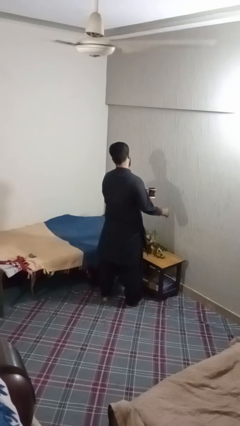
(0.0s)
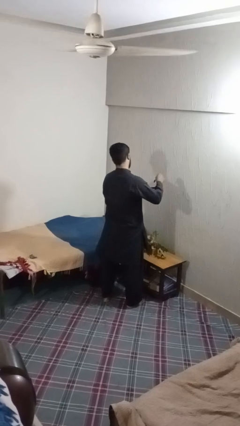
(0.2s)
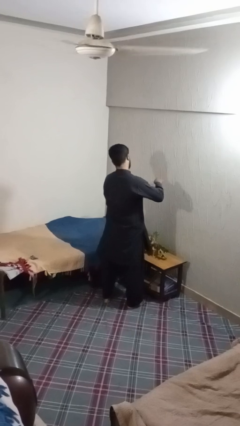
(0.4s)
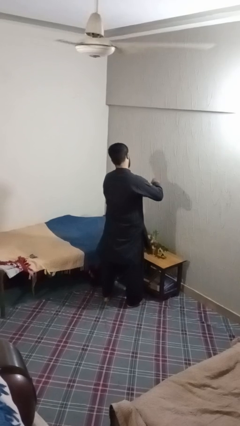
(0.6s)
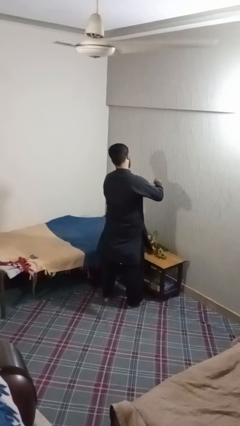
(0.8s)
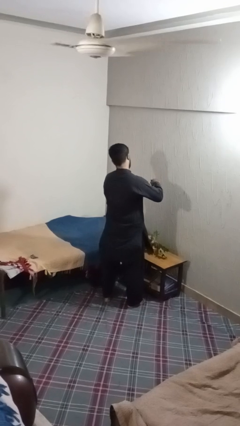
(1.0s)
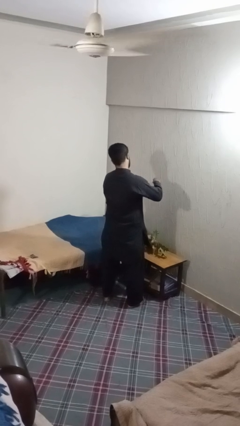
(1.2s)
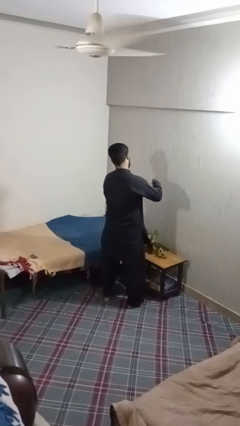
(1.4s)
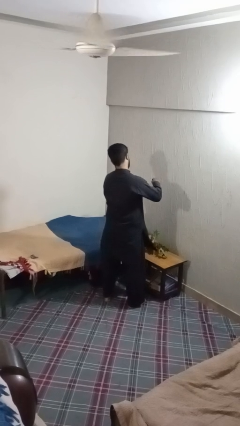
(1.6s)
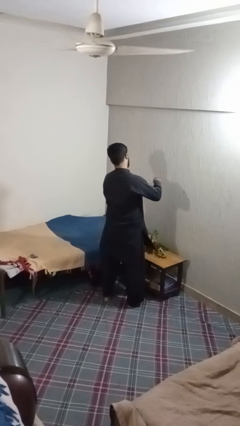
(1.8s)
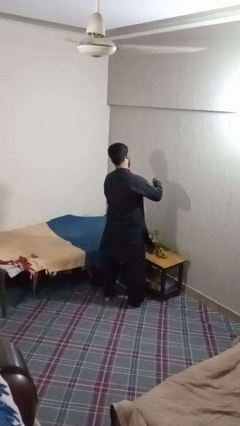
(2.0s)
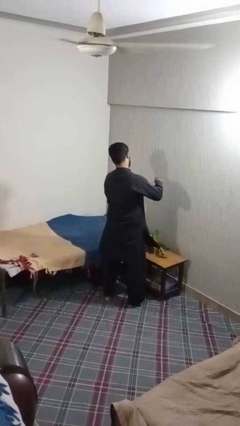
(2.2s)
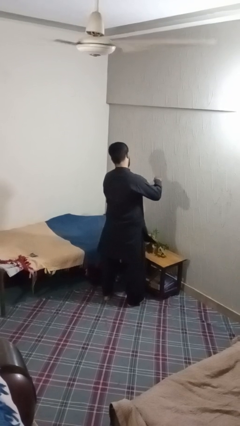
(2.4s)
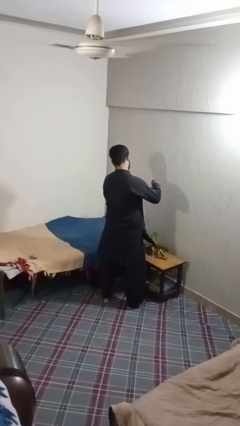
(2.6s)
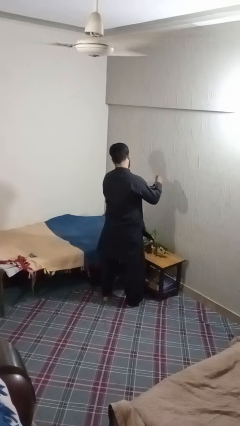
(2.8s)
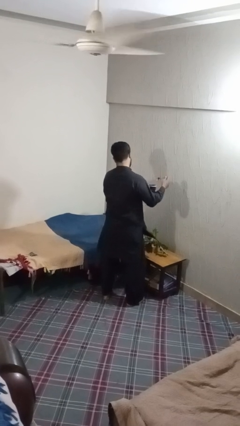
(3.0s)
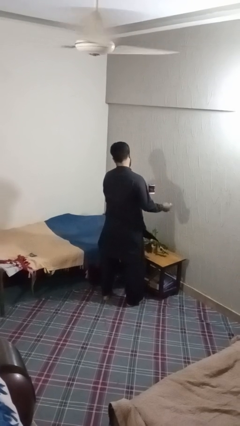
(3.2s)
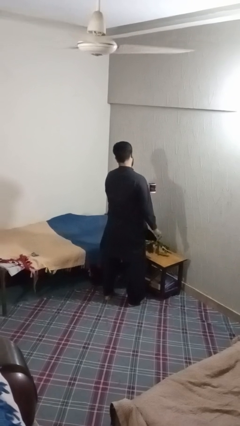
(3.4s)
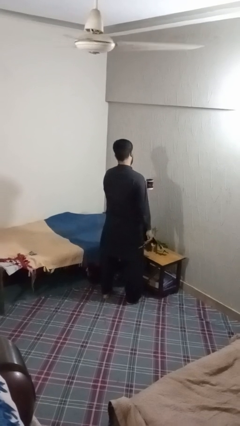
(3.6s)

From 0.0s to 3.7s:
person stirs mug

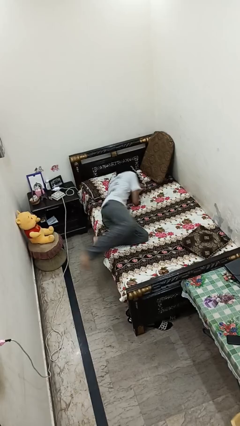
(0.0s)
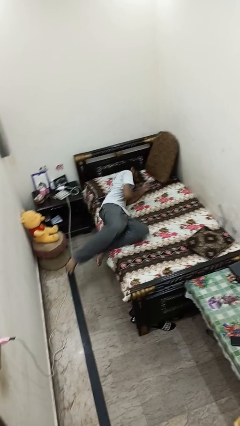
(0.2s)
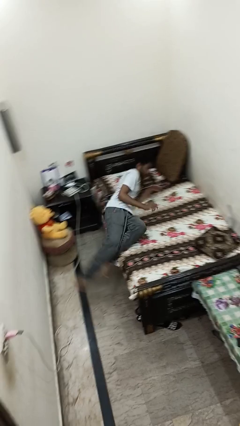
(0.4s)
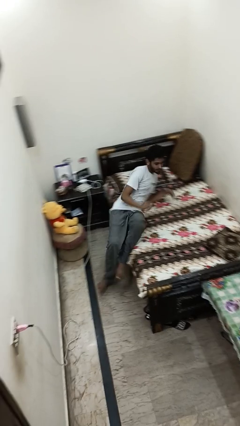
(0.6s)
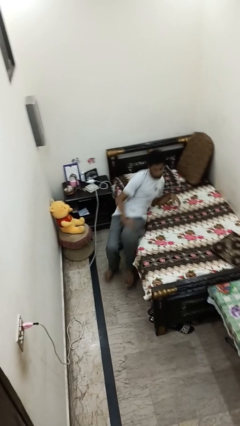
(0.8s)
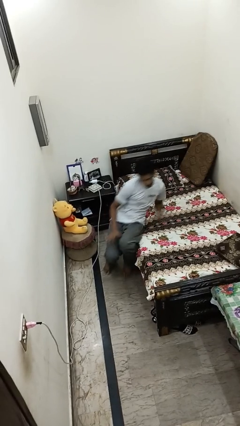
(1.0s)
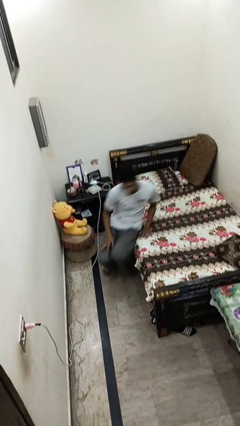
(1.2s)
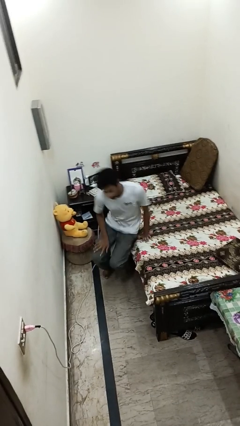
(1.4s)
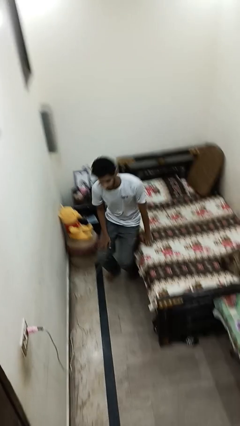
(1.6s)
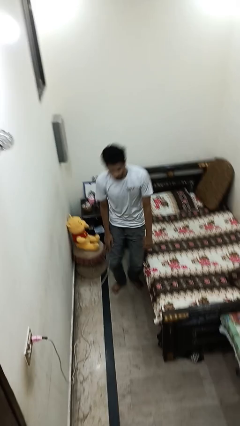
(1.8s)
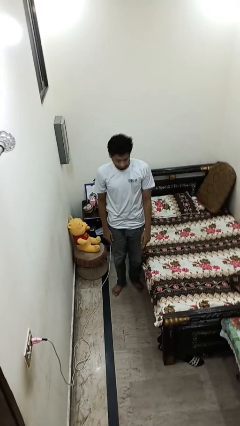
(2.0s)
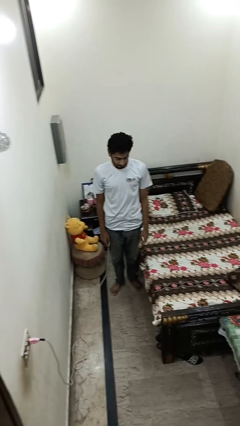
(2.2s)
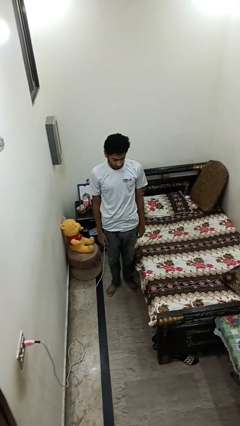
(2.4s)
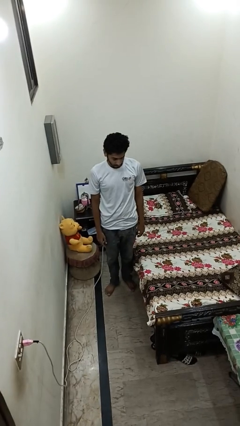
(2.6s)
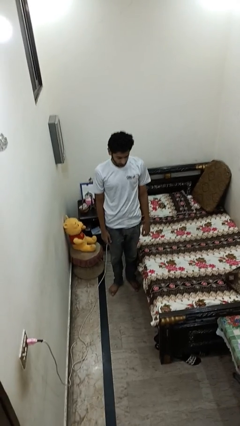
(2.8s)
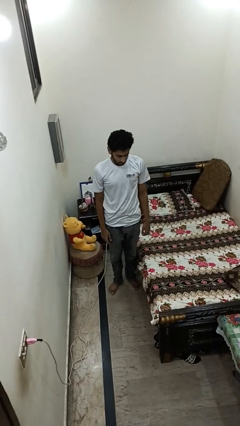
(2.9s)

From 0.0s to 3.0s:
person stands up

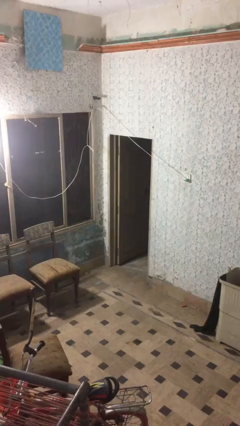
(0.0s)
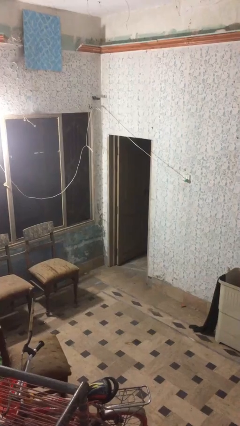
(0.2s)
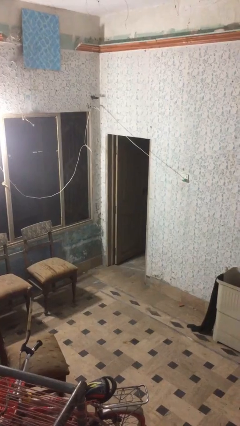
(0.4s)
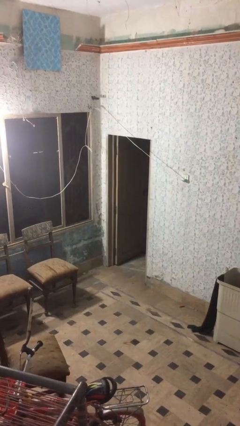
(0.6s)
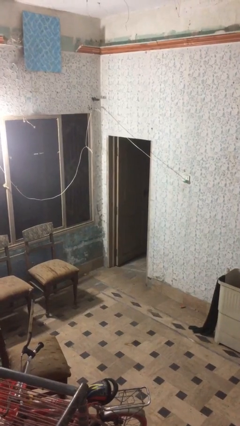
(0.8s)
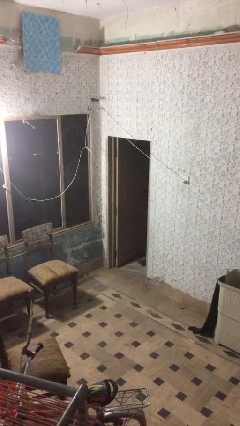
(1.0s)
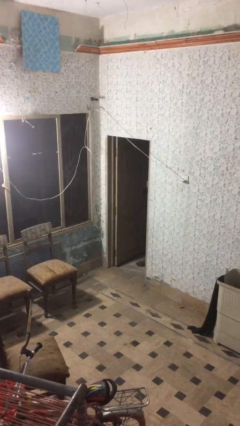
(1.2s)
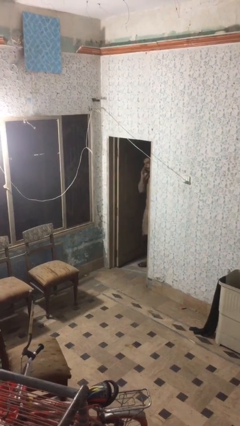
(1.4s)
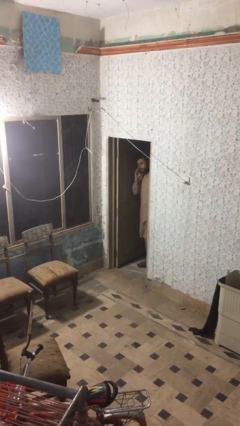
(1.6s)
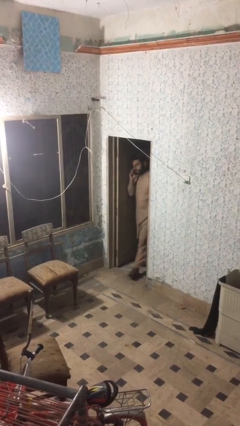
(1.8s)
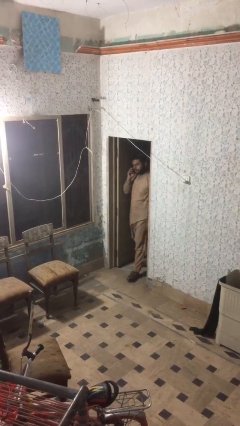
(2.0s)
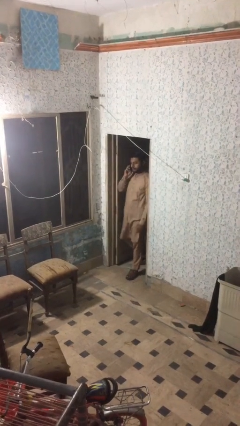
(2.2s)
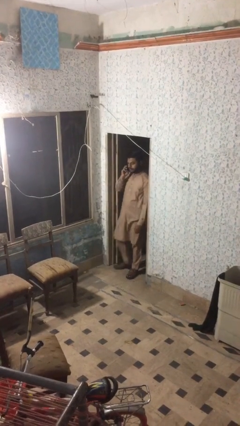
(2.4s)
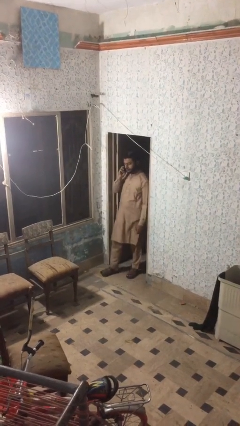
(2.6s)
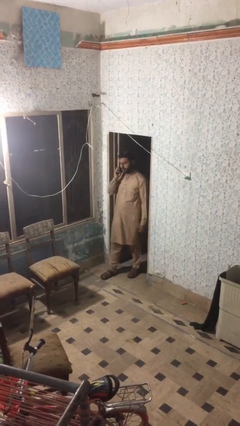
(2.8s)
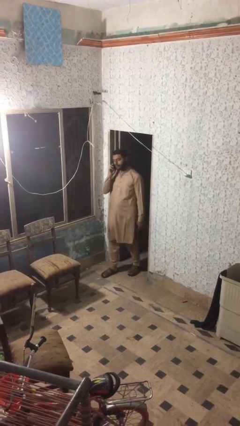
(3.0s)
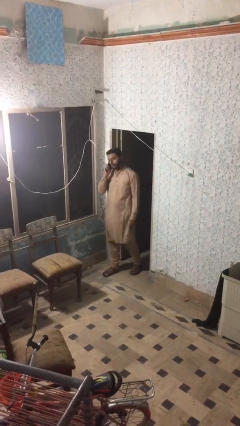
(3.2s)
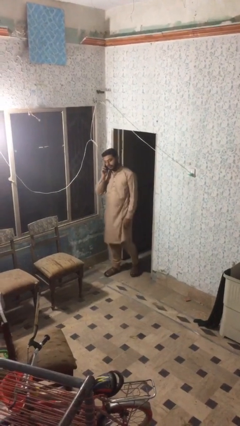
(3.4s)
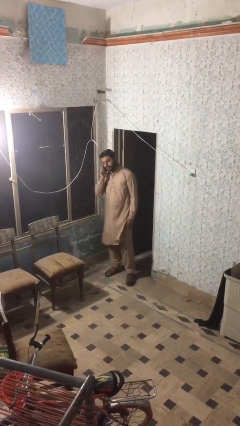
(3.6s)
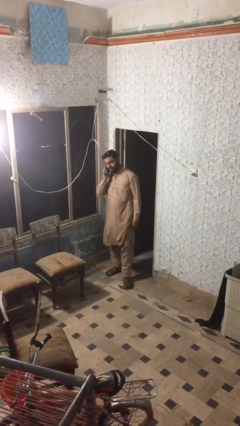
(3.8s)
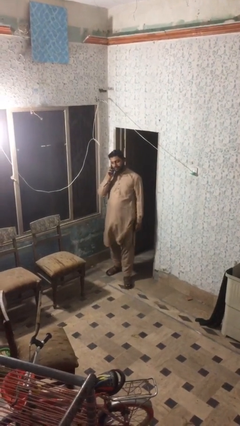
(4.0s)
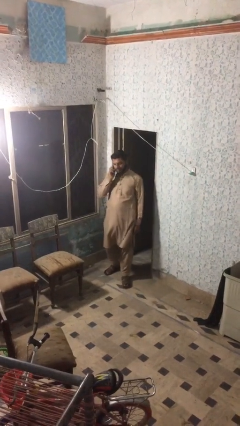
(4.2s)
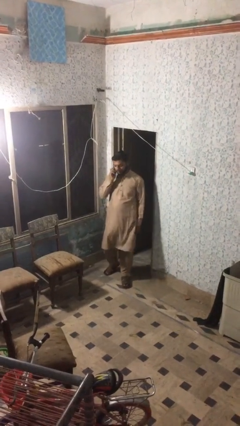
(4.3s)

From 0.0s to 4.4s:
person enters scene through structure

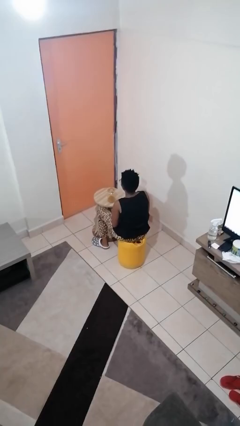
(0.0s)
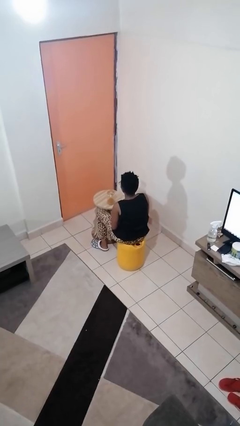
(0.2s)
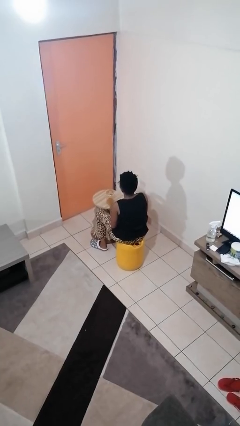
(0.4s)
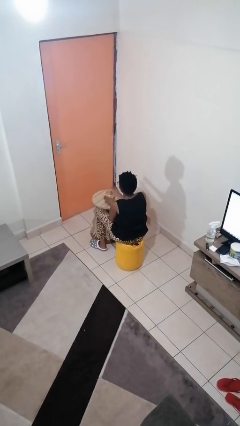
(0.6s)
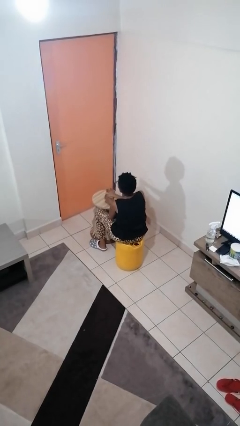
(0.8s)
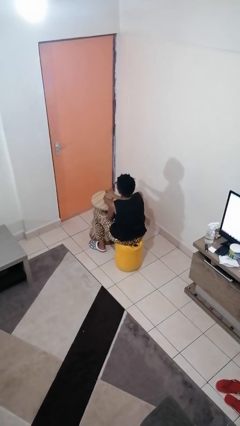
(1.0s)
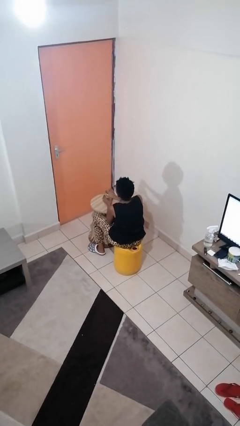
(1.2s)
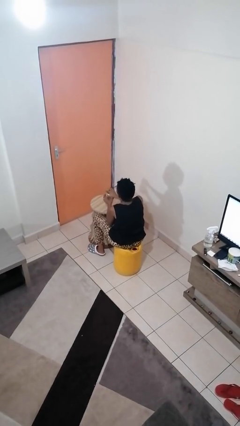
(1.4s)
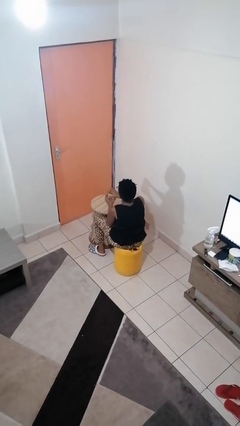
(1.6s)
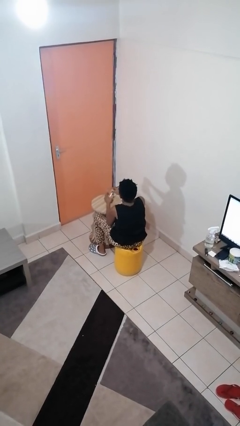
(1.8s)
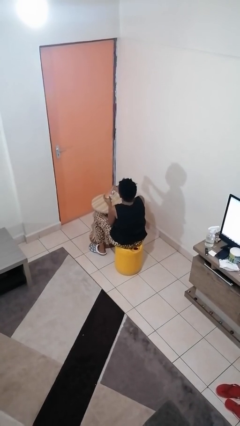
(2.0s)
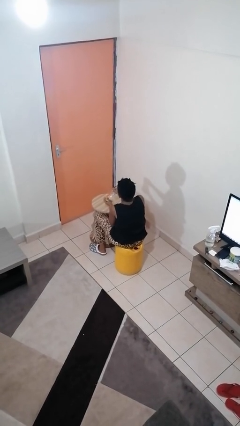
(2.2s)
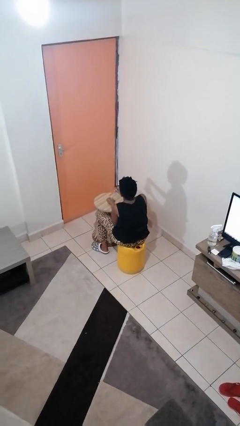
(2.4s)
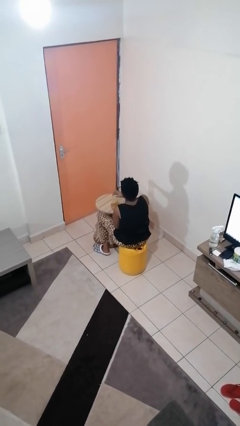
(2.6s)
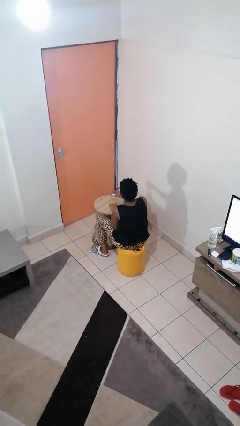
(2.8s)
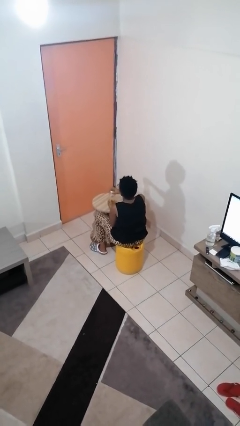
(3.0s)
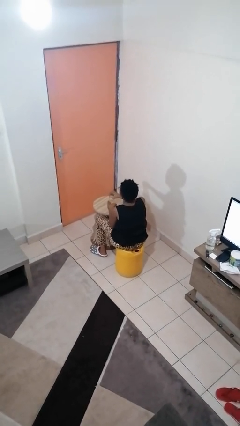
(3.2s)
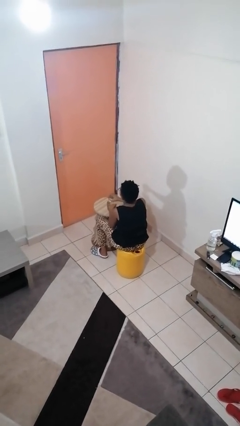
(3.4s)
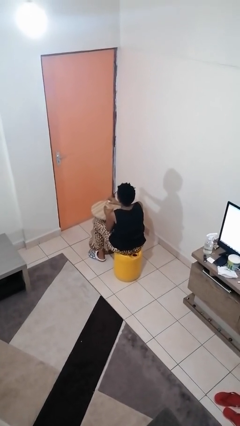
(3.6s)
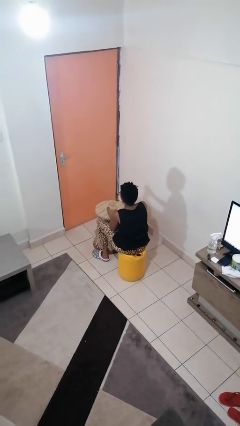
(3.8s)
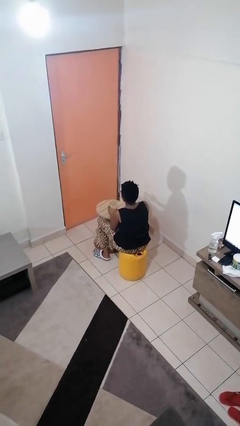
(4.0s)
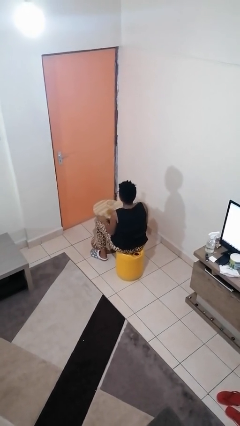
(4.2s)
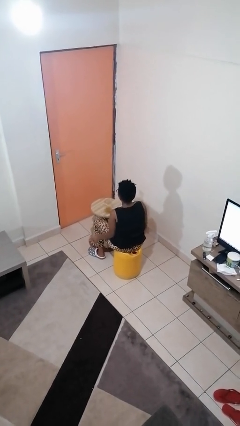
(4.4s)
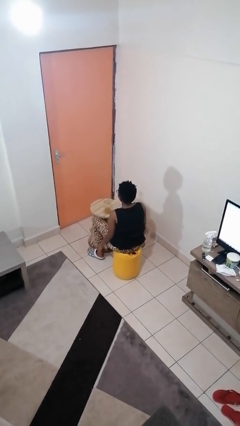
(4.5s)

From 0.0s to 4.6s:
person opens jar

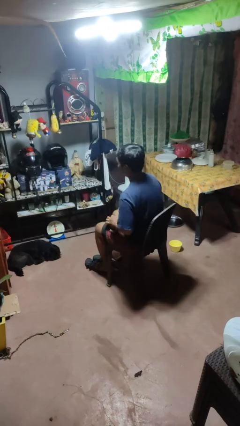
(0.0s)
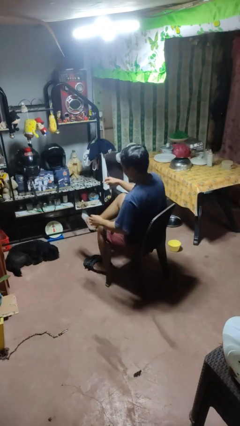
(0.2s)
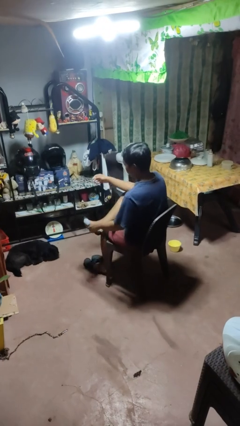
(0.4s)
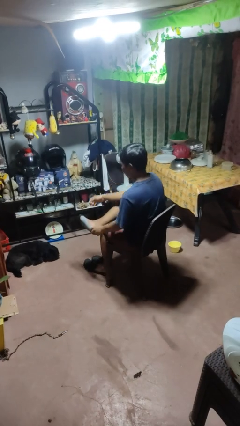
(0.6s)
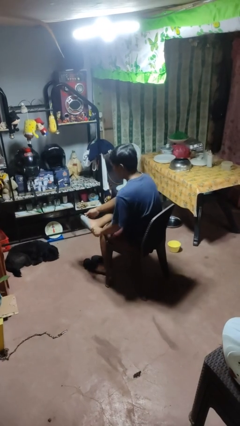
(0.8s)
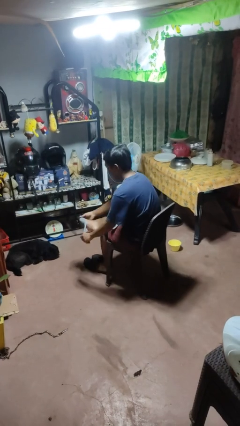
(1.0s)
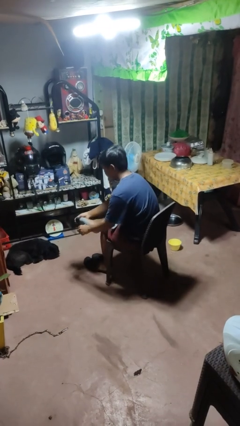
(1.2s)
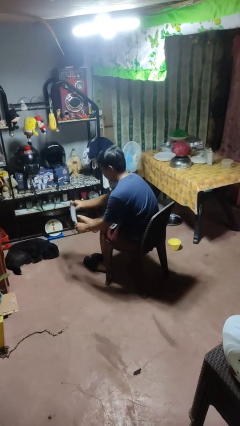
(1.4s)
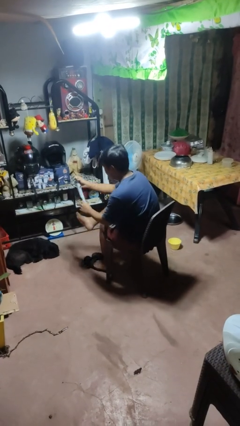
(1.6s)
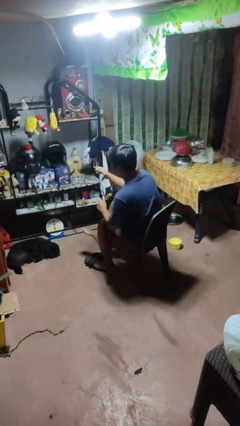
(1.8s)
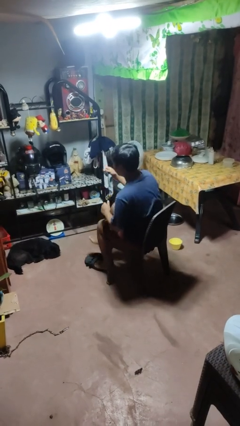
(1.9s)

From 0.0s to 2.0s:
person takes off socks

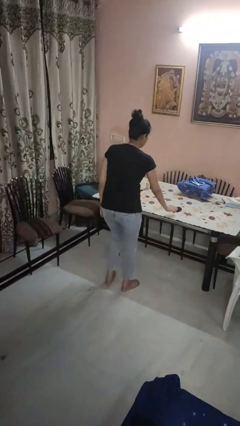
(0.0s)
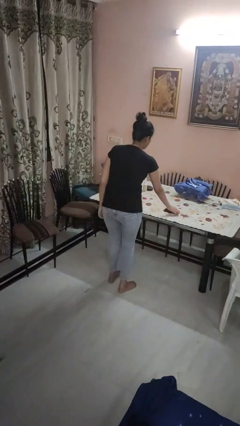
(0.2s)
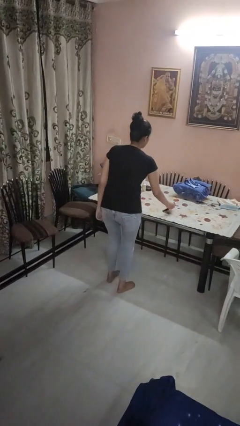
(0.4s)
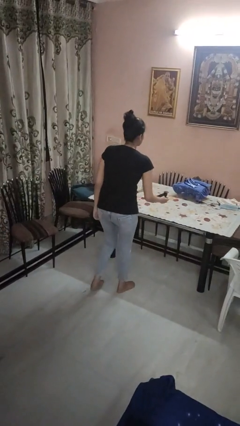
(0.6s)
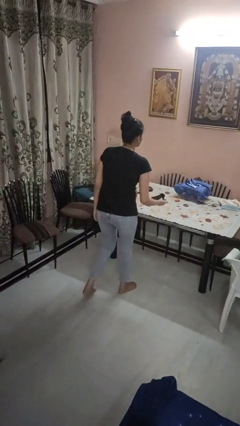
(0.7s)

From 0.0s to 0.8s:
person picks up object from table
